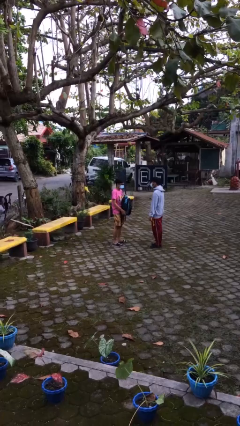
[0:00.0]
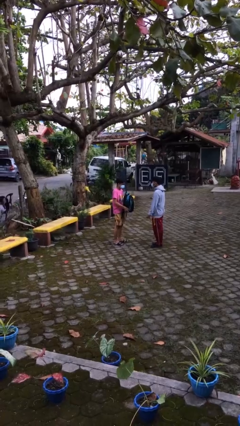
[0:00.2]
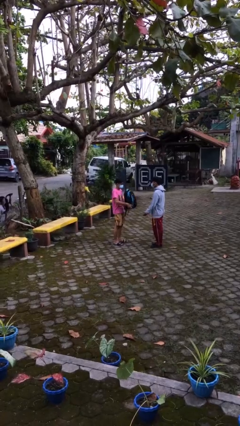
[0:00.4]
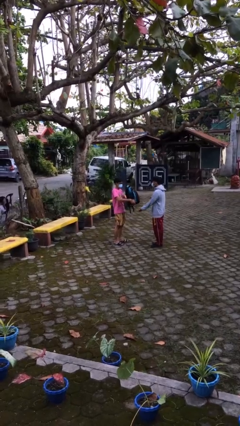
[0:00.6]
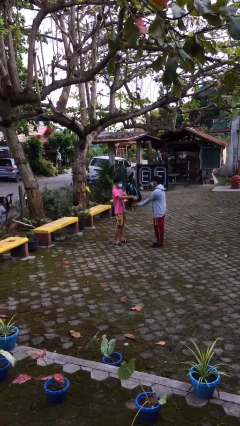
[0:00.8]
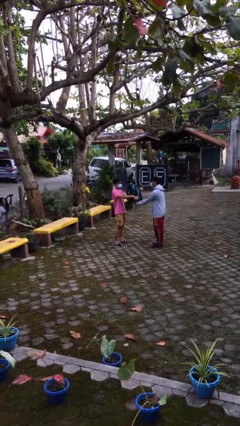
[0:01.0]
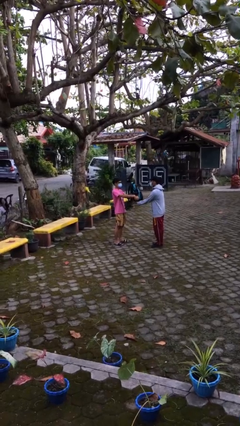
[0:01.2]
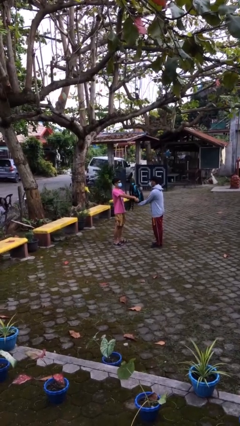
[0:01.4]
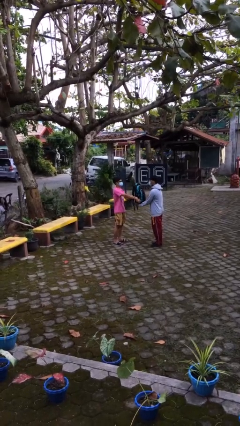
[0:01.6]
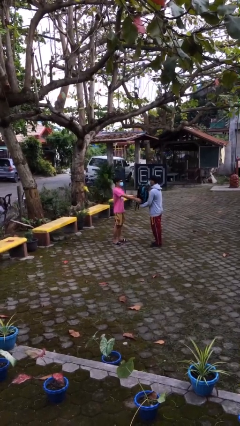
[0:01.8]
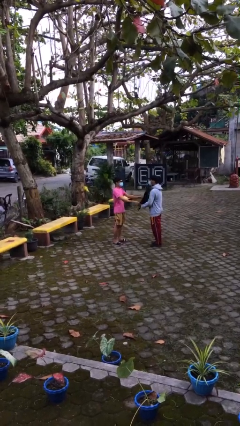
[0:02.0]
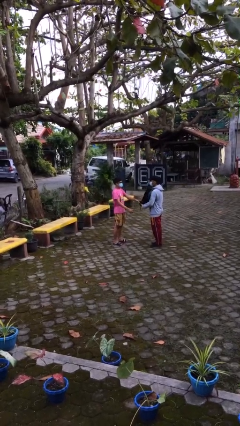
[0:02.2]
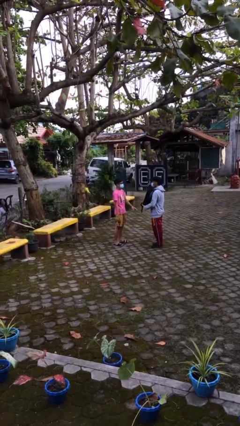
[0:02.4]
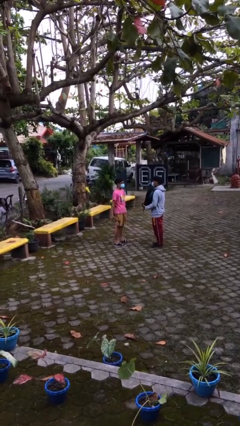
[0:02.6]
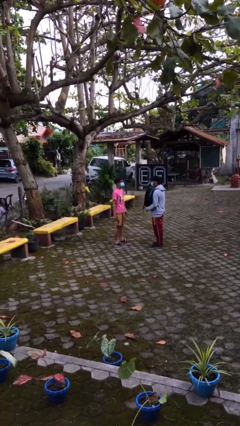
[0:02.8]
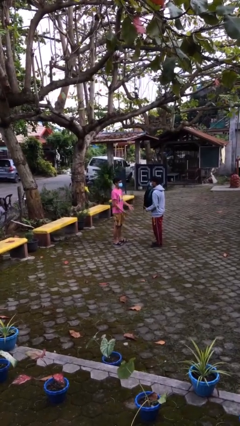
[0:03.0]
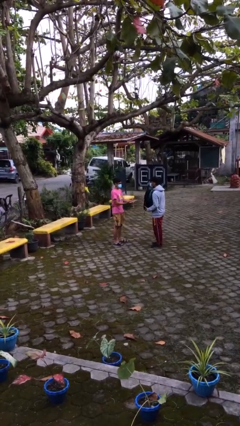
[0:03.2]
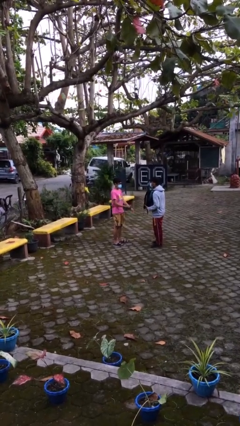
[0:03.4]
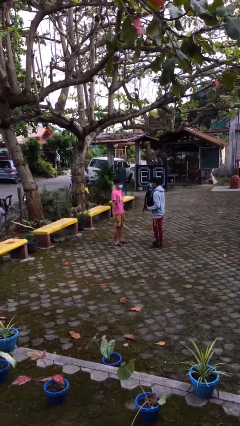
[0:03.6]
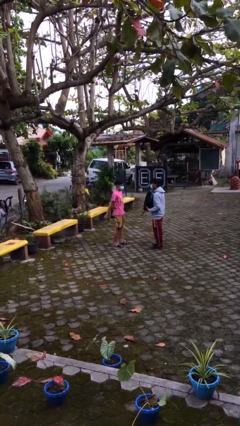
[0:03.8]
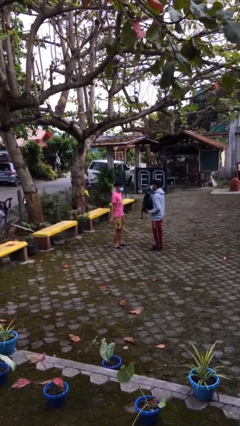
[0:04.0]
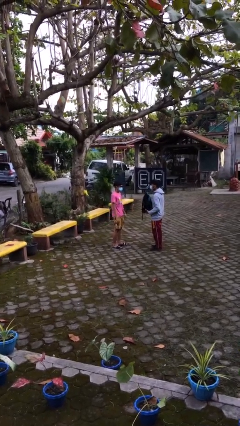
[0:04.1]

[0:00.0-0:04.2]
person transfers object to person

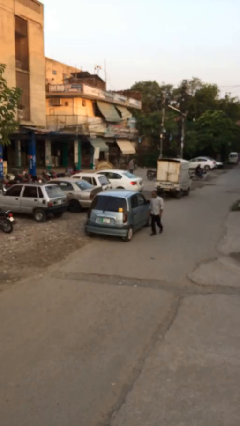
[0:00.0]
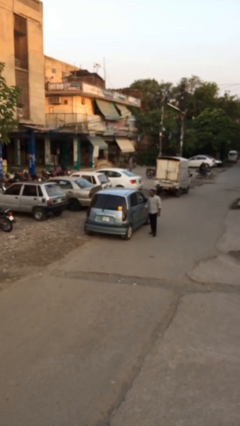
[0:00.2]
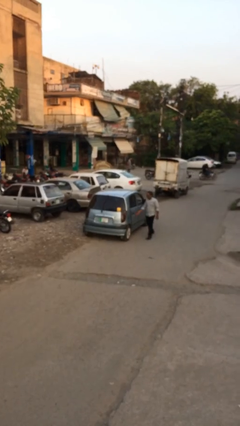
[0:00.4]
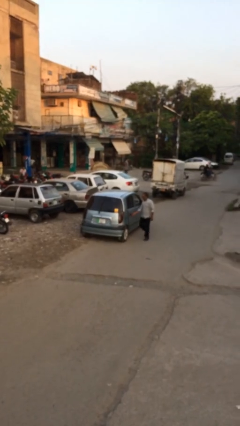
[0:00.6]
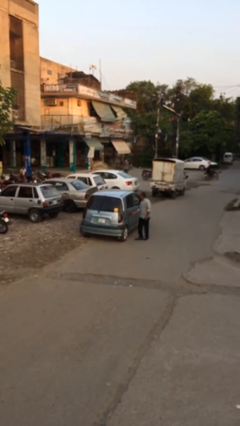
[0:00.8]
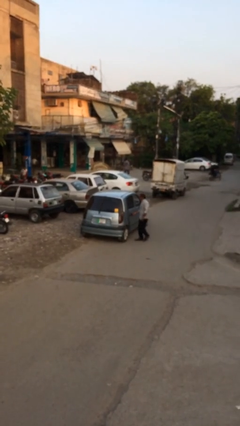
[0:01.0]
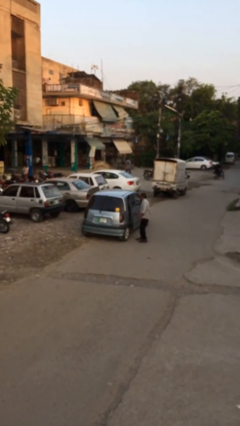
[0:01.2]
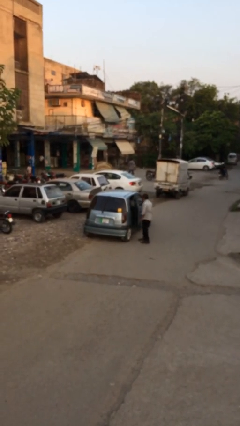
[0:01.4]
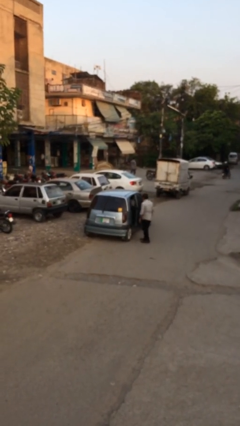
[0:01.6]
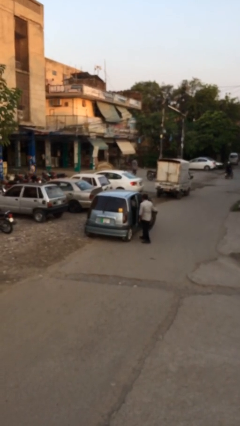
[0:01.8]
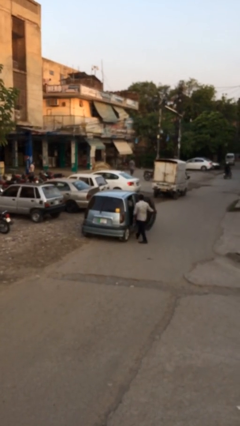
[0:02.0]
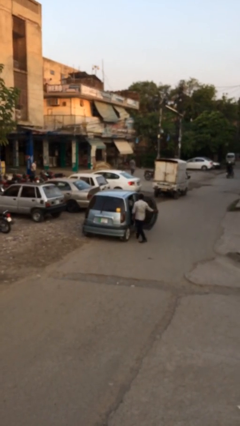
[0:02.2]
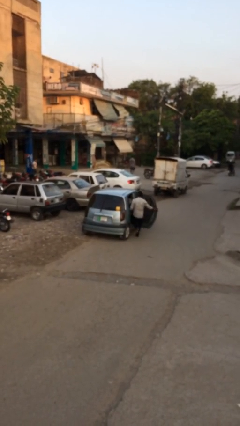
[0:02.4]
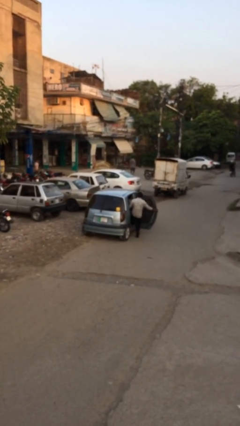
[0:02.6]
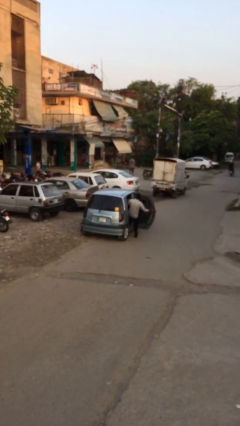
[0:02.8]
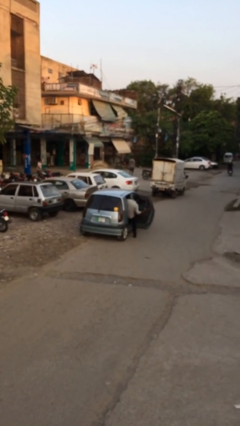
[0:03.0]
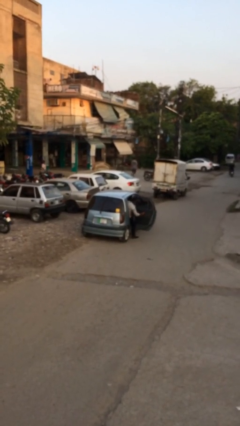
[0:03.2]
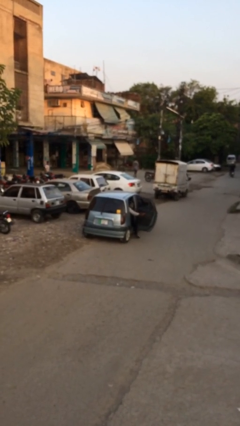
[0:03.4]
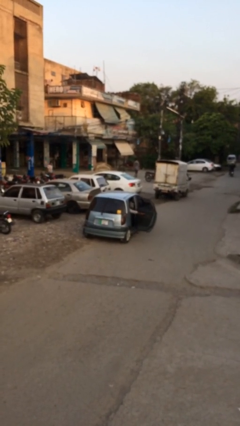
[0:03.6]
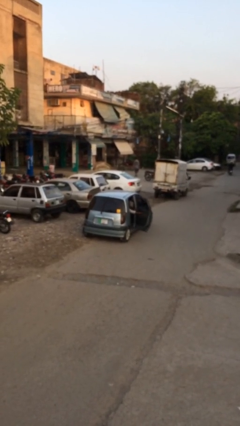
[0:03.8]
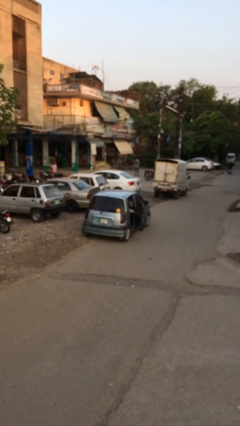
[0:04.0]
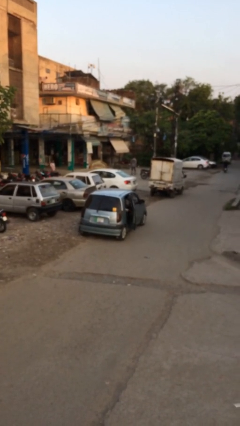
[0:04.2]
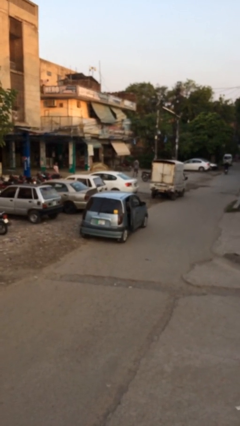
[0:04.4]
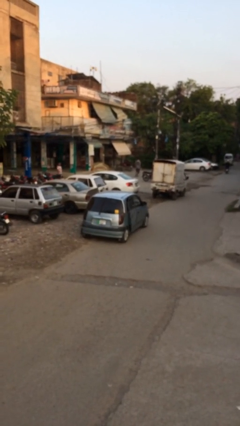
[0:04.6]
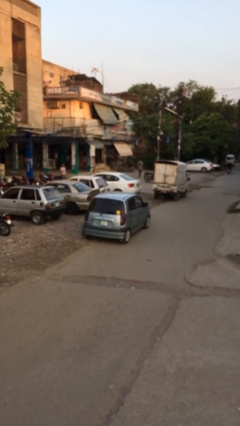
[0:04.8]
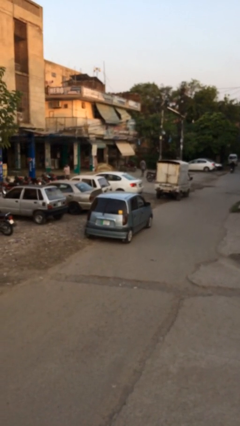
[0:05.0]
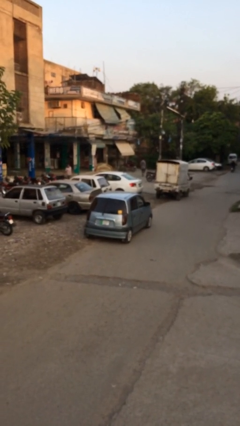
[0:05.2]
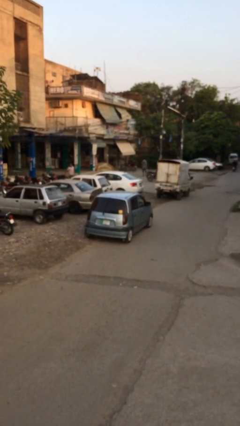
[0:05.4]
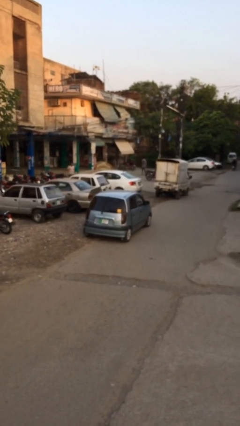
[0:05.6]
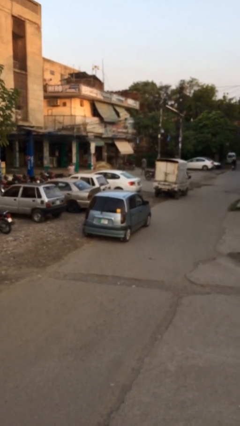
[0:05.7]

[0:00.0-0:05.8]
car picks up person

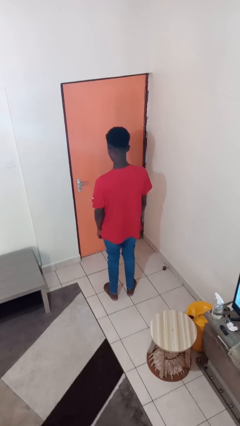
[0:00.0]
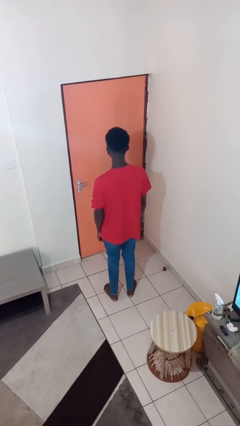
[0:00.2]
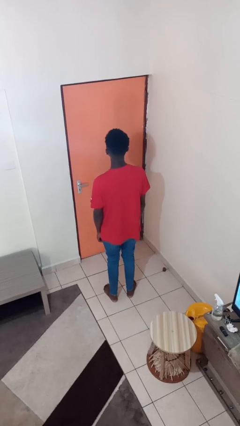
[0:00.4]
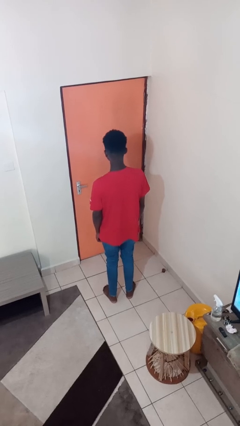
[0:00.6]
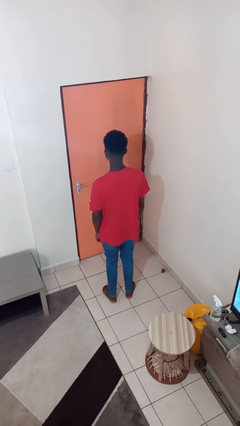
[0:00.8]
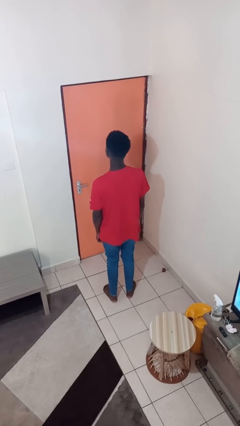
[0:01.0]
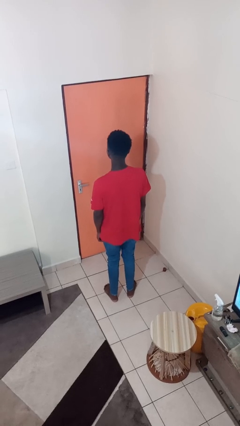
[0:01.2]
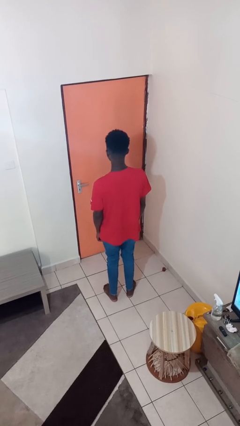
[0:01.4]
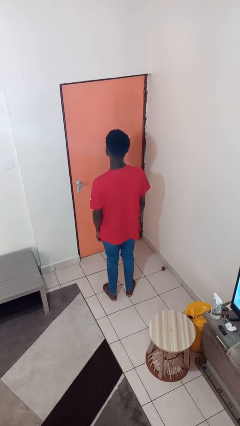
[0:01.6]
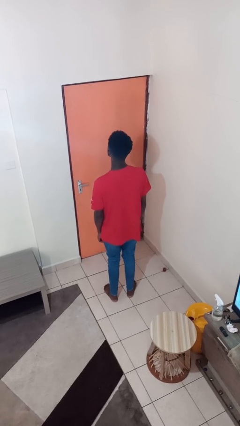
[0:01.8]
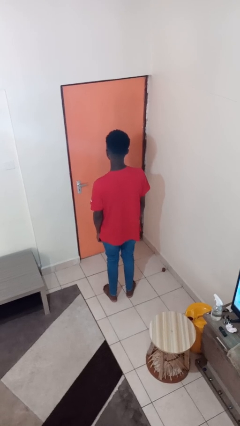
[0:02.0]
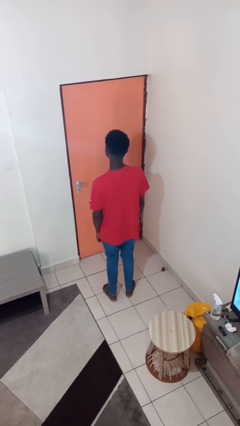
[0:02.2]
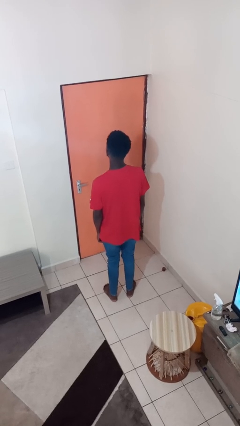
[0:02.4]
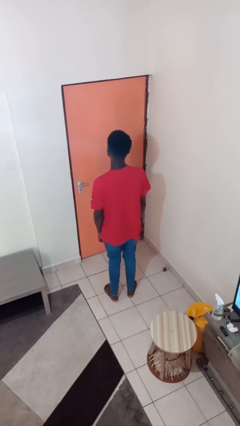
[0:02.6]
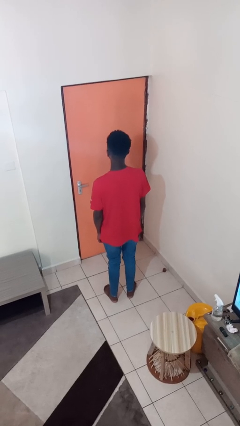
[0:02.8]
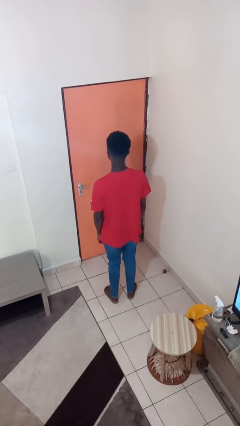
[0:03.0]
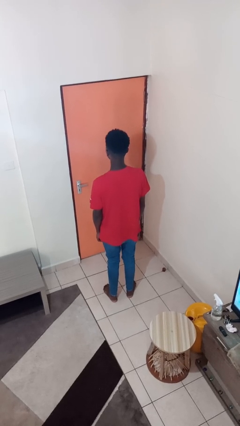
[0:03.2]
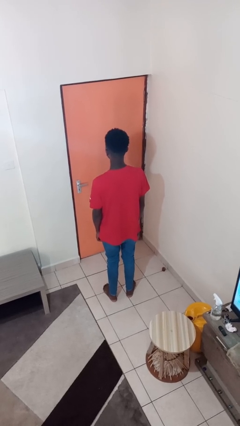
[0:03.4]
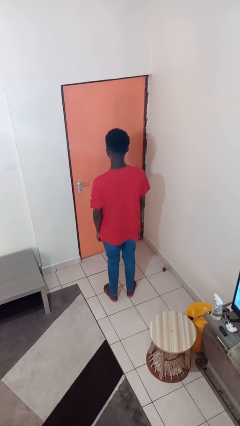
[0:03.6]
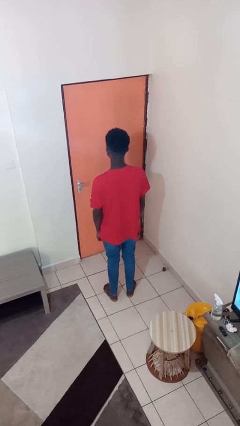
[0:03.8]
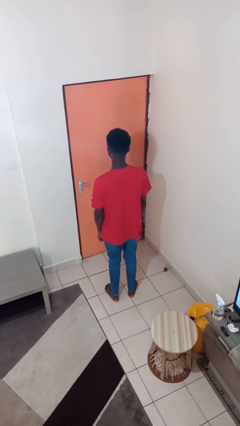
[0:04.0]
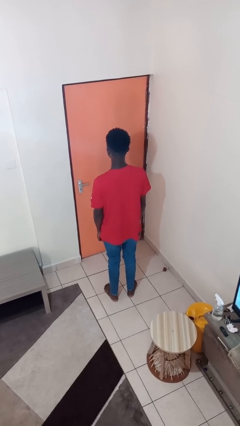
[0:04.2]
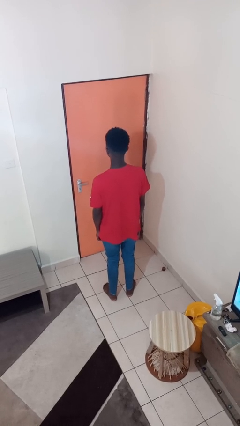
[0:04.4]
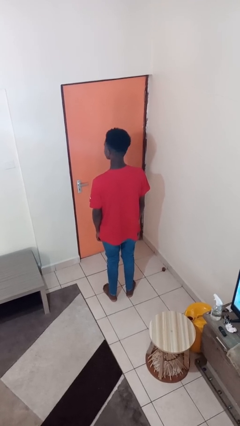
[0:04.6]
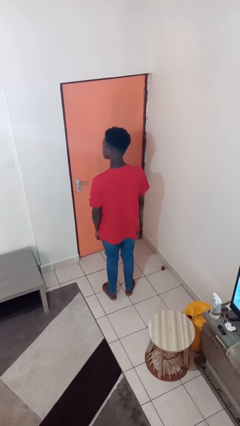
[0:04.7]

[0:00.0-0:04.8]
person nods head

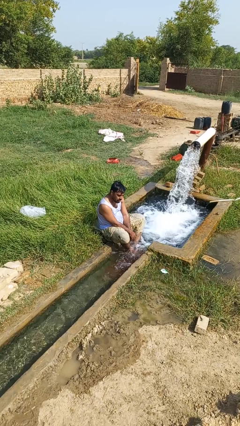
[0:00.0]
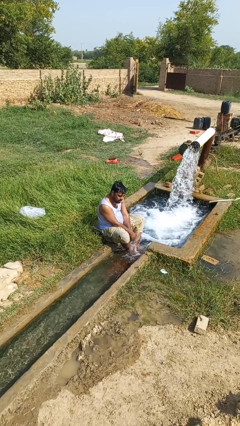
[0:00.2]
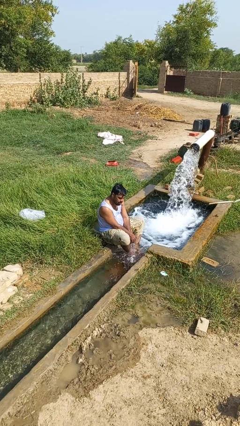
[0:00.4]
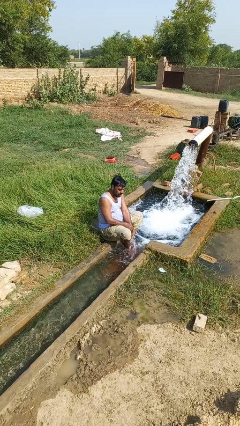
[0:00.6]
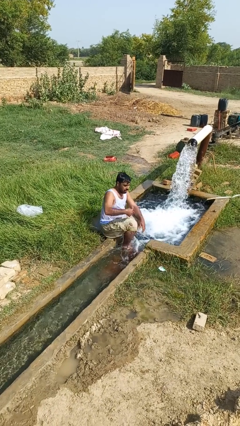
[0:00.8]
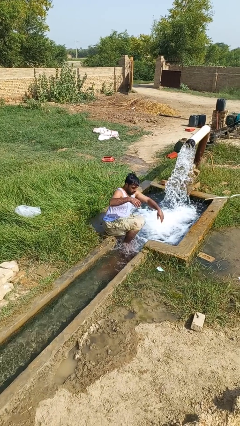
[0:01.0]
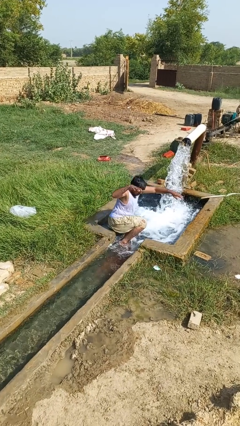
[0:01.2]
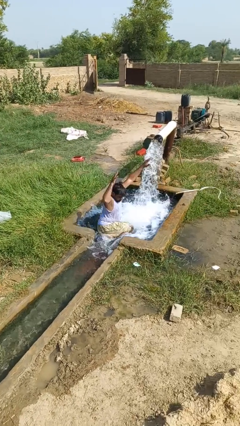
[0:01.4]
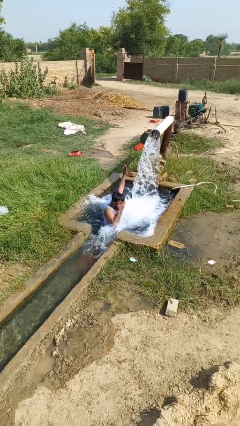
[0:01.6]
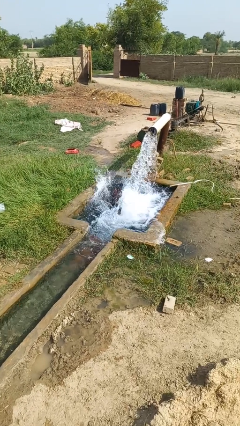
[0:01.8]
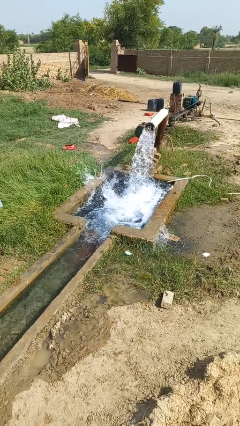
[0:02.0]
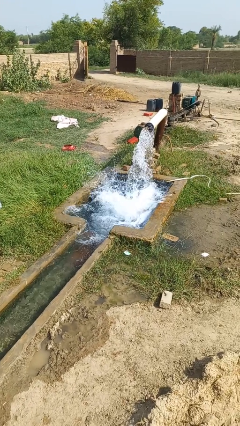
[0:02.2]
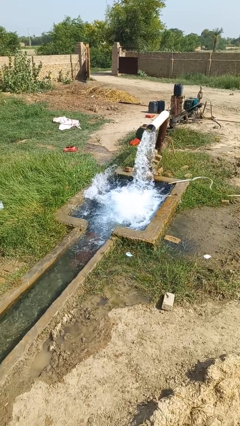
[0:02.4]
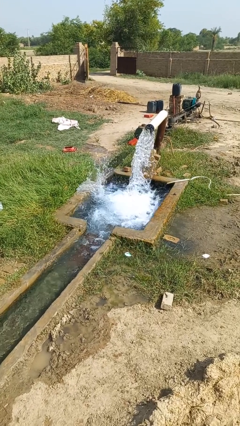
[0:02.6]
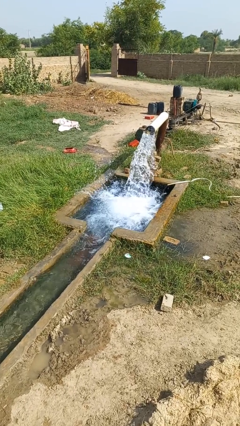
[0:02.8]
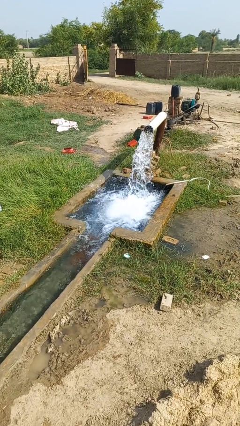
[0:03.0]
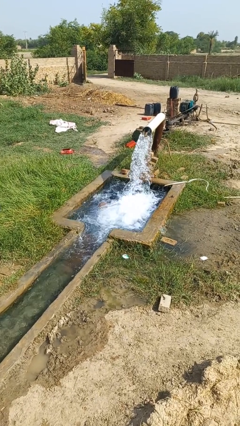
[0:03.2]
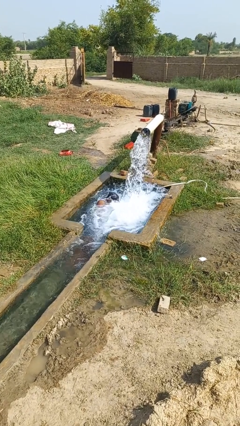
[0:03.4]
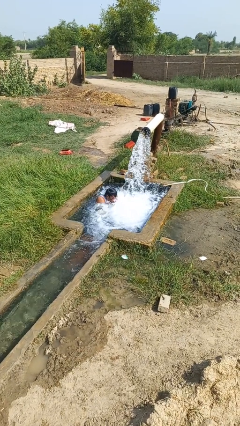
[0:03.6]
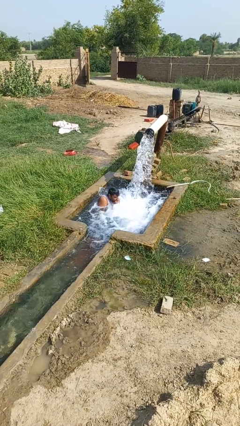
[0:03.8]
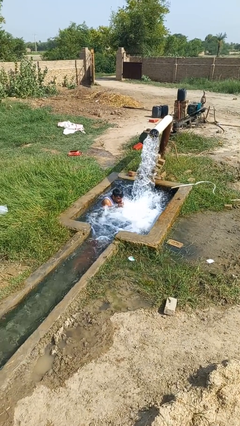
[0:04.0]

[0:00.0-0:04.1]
person falls into pool
